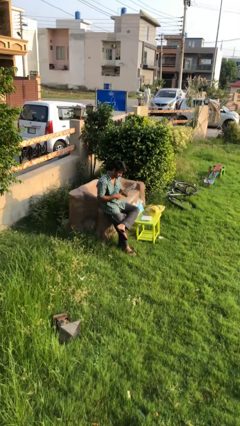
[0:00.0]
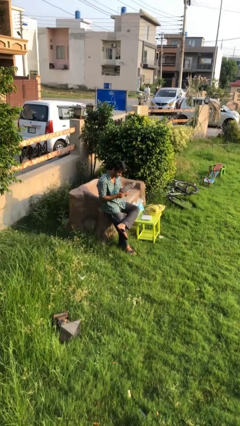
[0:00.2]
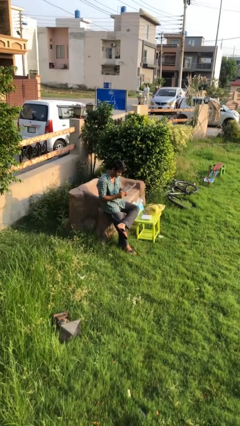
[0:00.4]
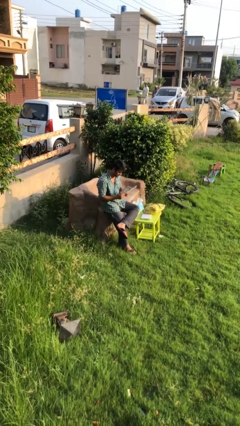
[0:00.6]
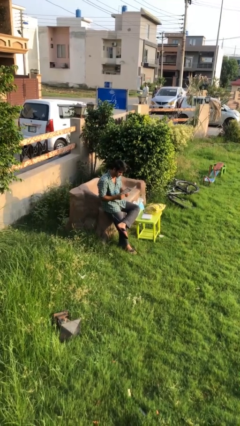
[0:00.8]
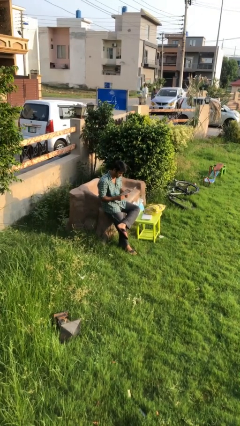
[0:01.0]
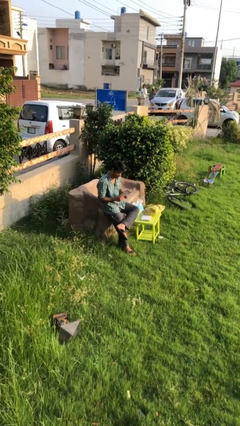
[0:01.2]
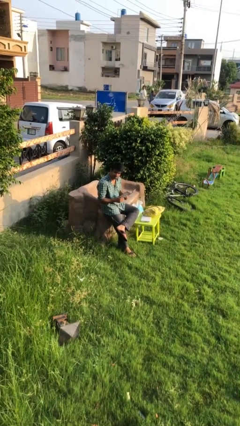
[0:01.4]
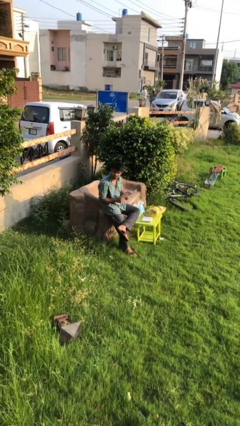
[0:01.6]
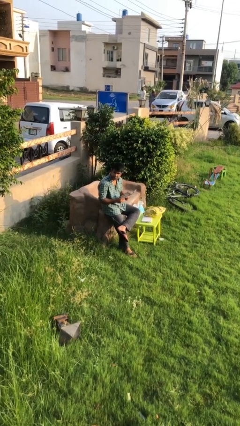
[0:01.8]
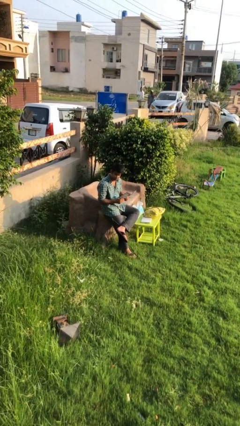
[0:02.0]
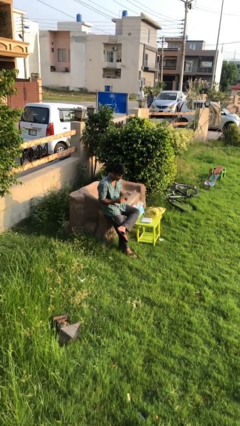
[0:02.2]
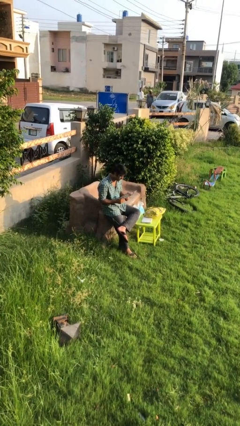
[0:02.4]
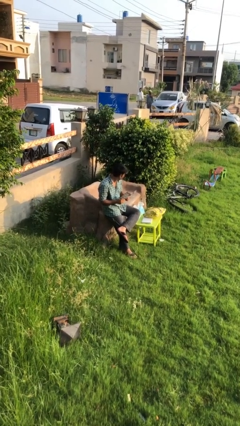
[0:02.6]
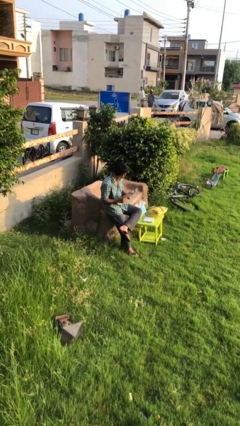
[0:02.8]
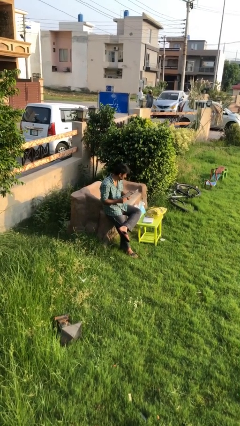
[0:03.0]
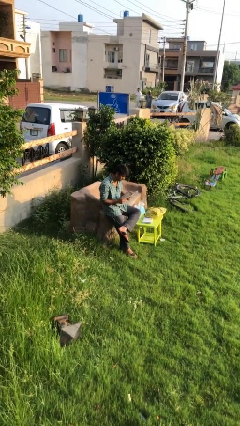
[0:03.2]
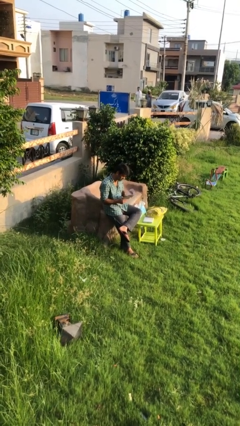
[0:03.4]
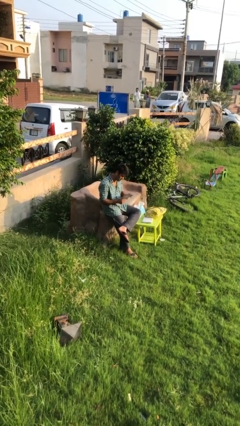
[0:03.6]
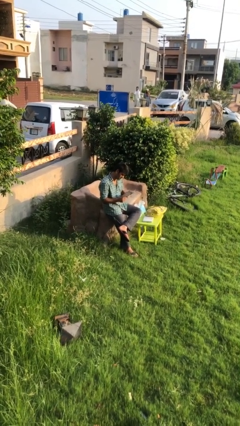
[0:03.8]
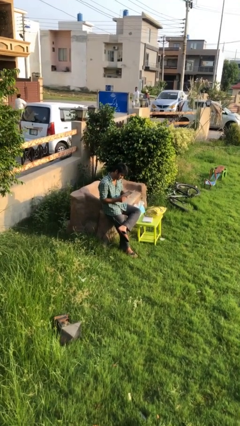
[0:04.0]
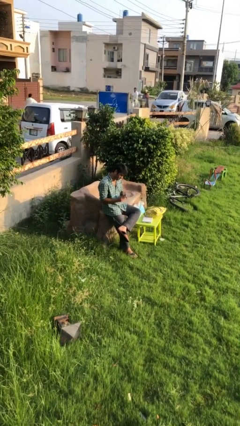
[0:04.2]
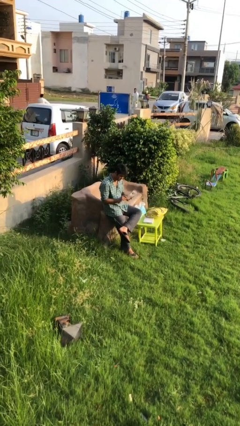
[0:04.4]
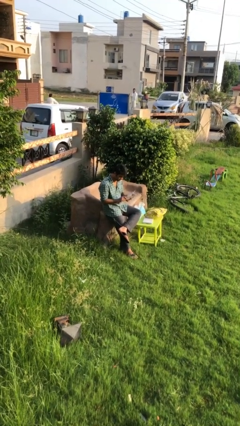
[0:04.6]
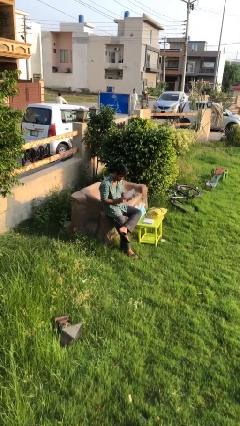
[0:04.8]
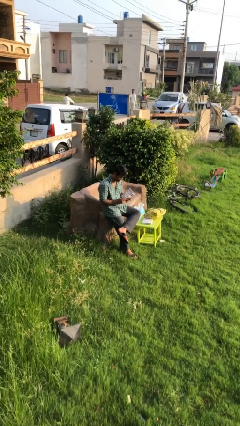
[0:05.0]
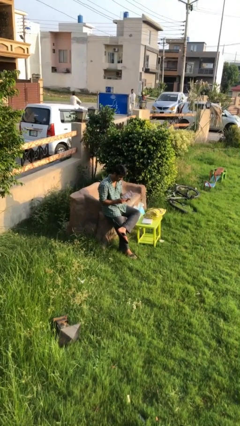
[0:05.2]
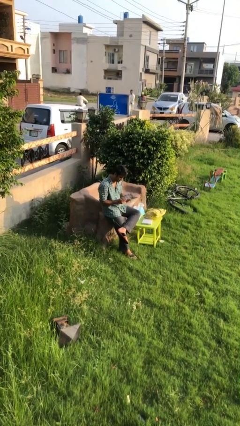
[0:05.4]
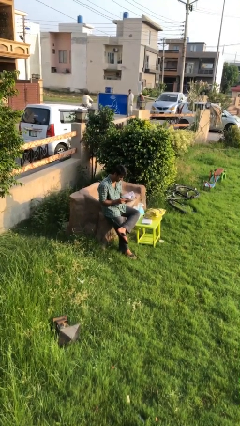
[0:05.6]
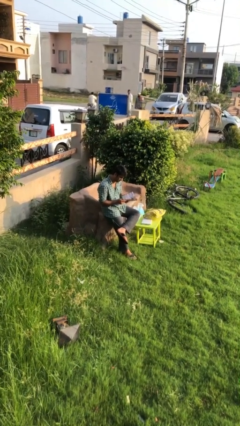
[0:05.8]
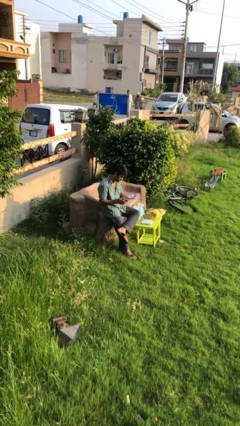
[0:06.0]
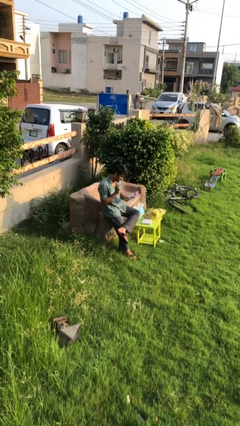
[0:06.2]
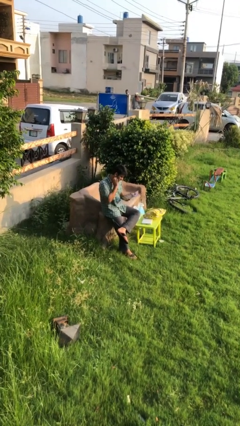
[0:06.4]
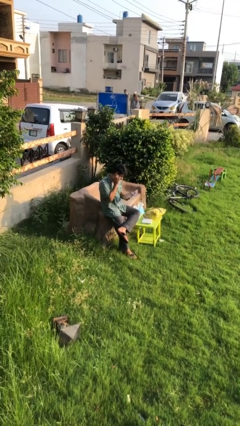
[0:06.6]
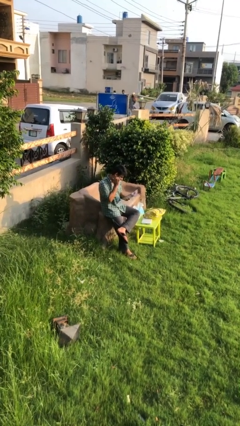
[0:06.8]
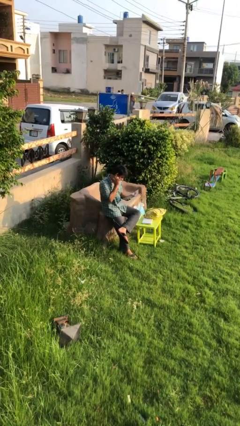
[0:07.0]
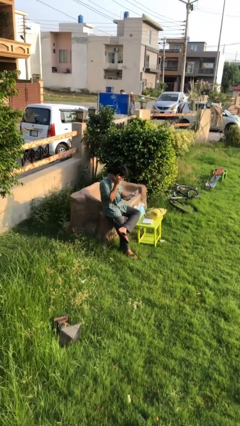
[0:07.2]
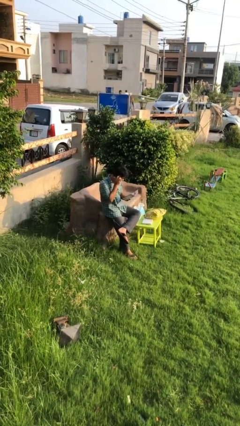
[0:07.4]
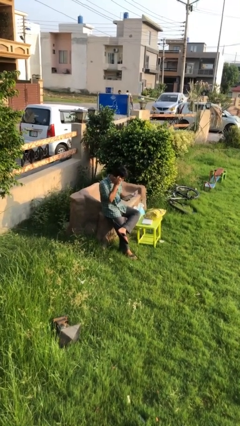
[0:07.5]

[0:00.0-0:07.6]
person reads document

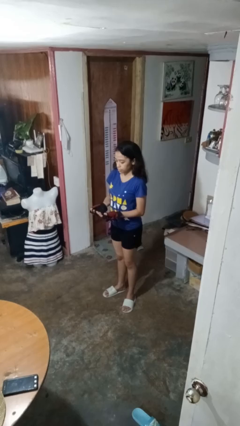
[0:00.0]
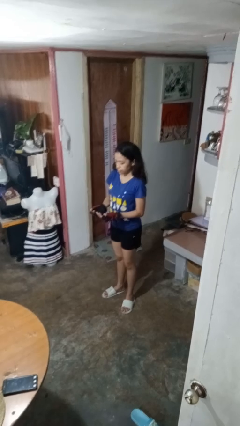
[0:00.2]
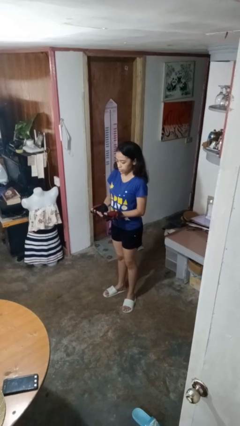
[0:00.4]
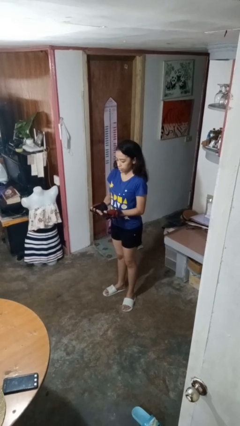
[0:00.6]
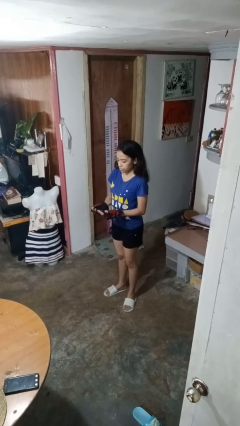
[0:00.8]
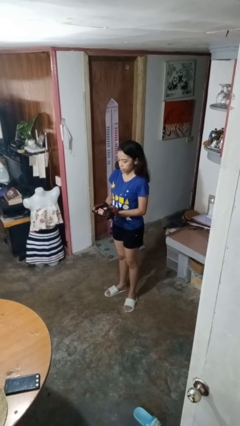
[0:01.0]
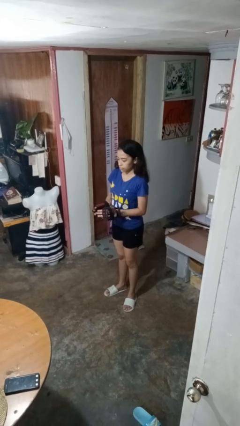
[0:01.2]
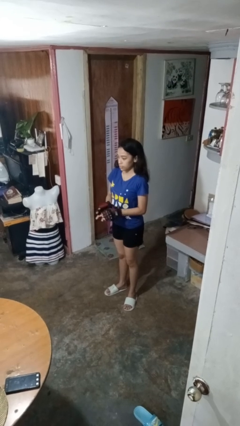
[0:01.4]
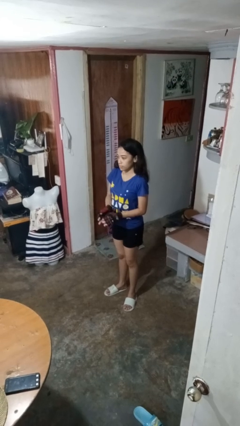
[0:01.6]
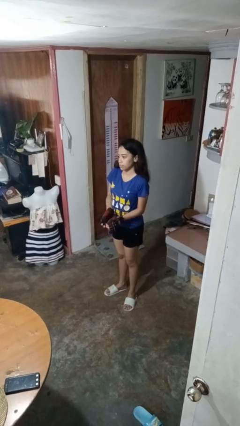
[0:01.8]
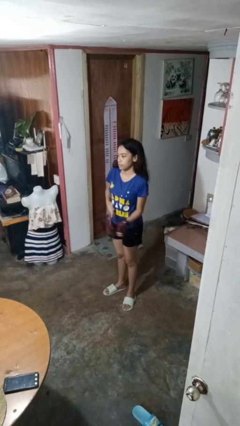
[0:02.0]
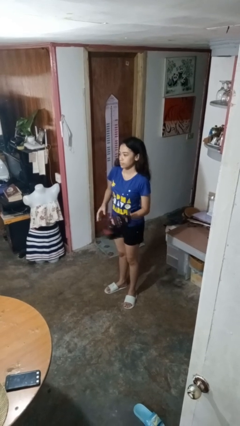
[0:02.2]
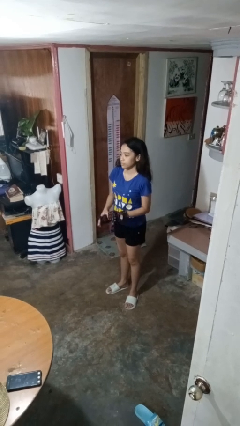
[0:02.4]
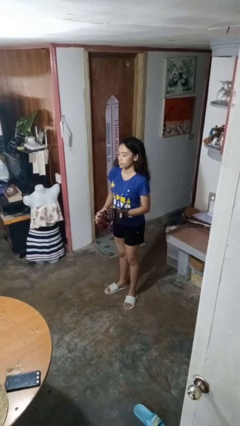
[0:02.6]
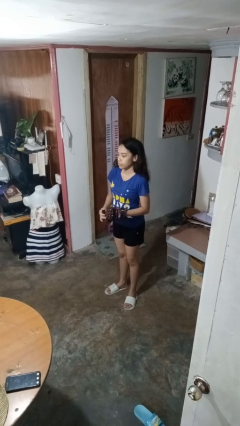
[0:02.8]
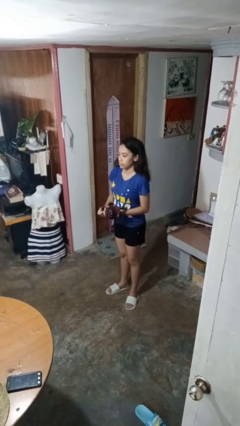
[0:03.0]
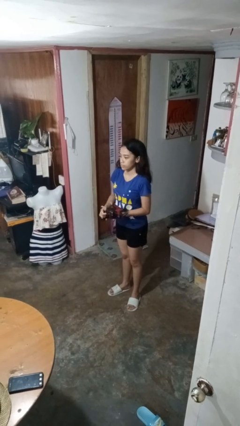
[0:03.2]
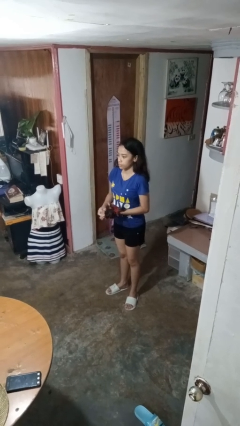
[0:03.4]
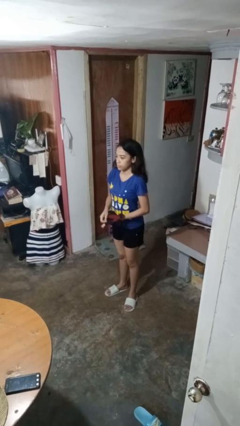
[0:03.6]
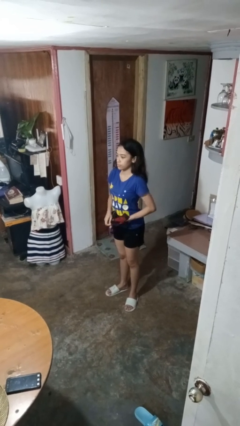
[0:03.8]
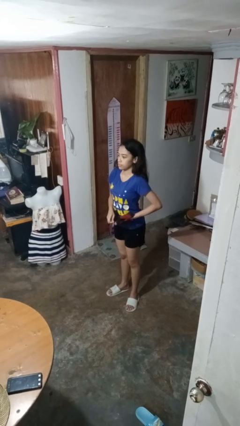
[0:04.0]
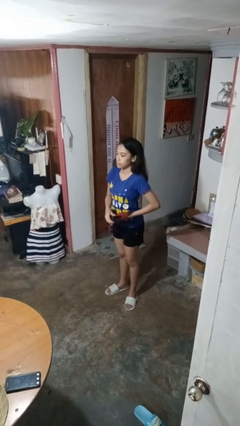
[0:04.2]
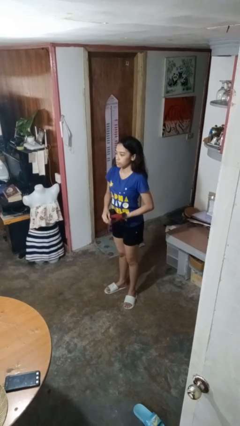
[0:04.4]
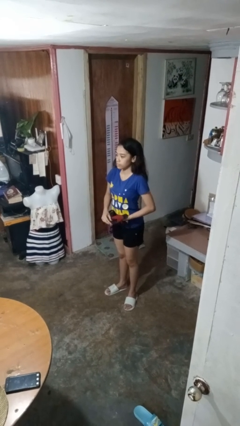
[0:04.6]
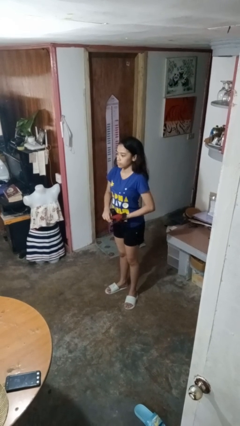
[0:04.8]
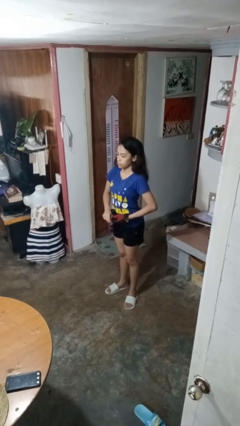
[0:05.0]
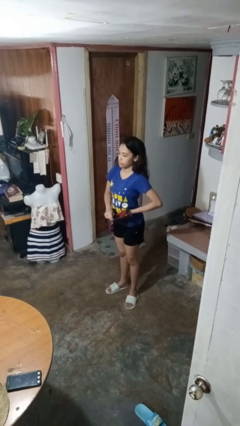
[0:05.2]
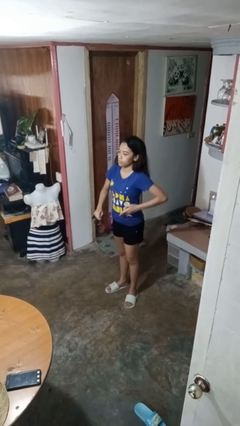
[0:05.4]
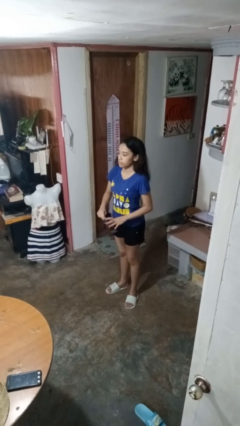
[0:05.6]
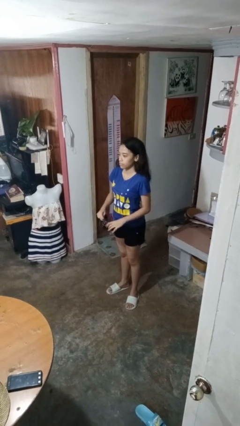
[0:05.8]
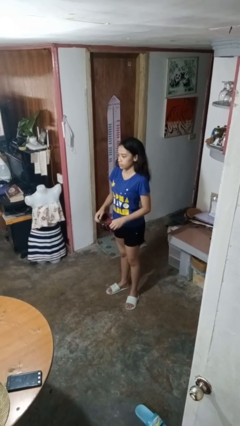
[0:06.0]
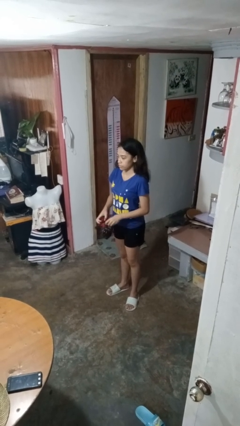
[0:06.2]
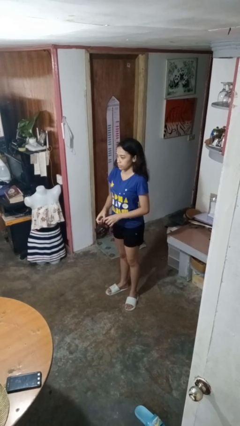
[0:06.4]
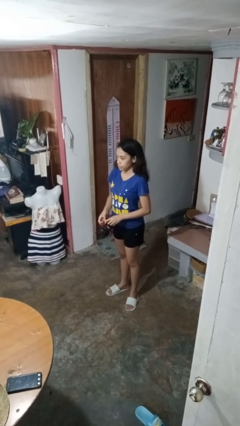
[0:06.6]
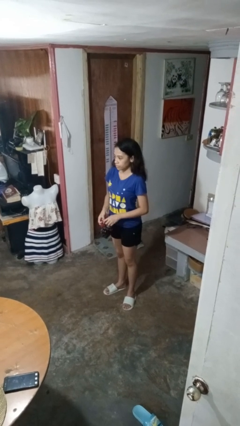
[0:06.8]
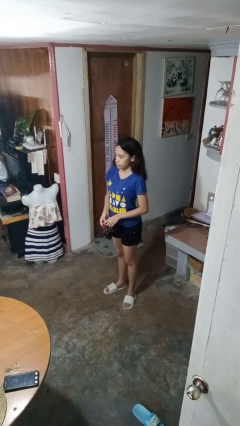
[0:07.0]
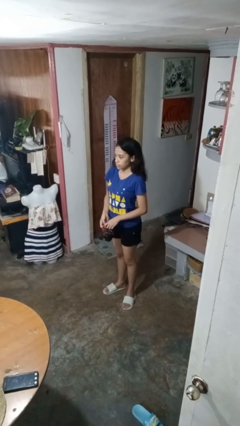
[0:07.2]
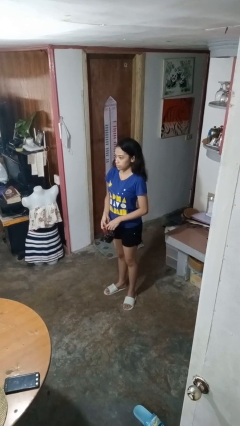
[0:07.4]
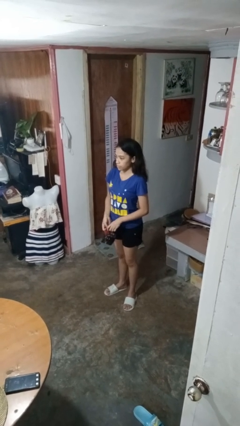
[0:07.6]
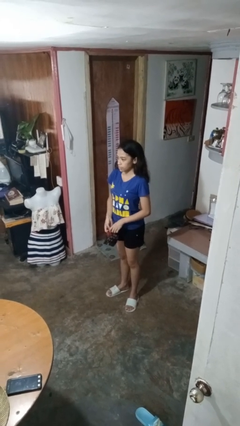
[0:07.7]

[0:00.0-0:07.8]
person takes off gloves

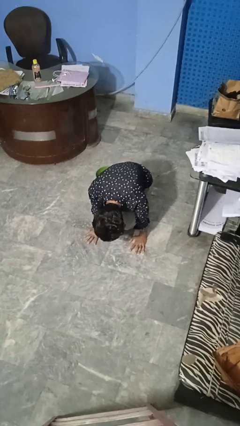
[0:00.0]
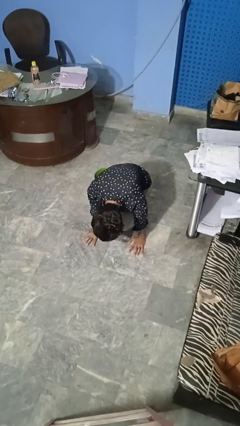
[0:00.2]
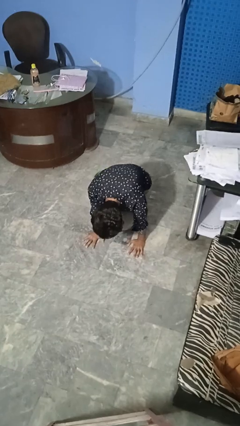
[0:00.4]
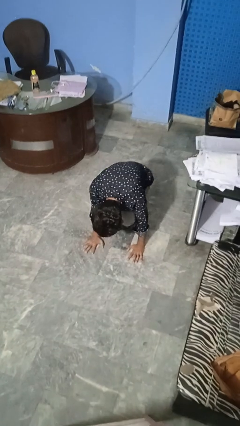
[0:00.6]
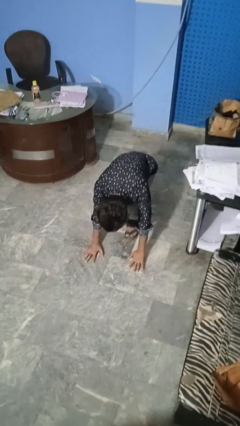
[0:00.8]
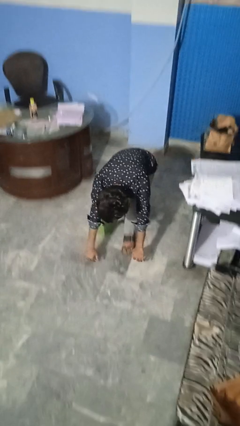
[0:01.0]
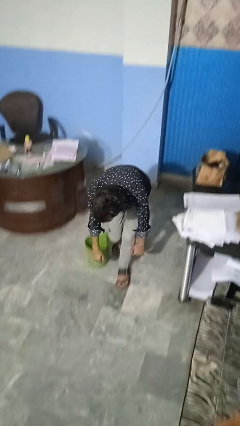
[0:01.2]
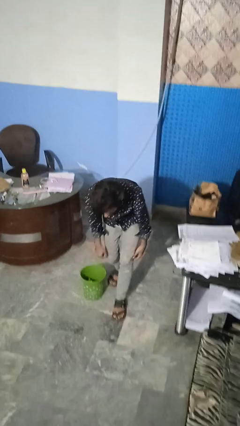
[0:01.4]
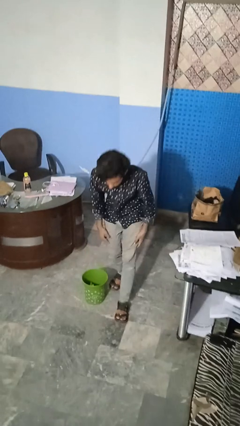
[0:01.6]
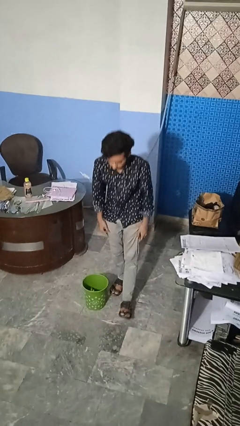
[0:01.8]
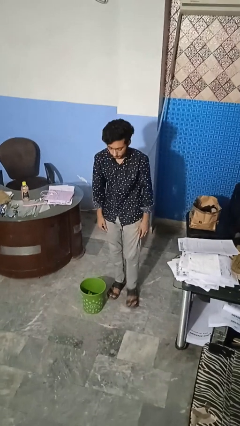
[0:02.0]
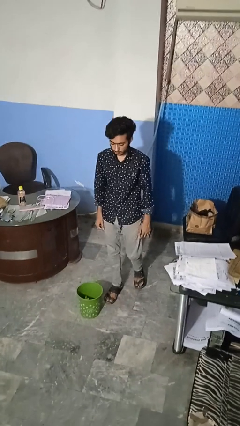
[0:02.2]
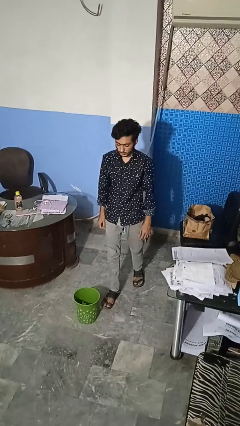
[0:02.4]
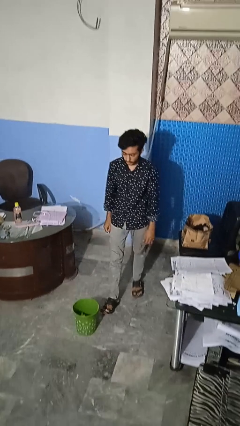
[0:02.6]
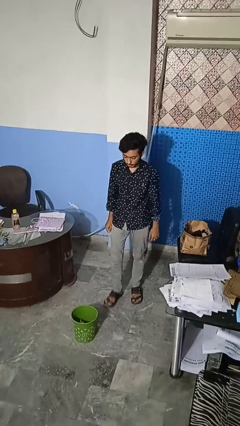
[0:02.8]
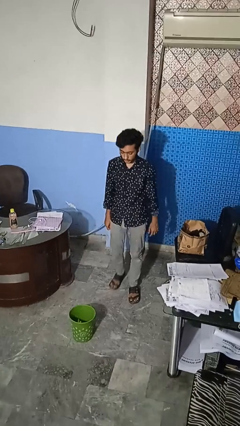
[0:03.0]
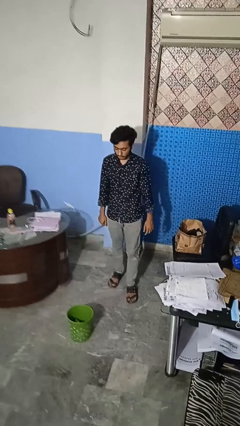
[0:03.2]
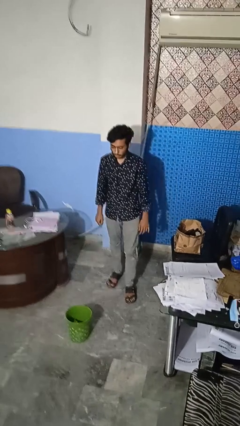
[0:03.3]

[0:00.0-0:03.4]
person stands up from floor
